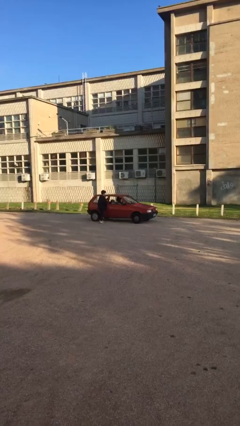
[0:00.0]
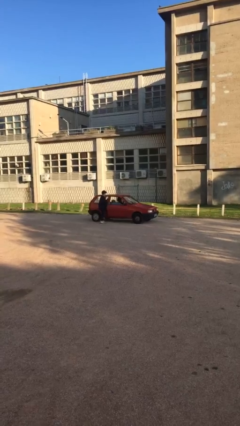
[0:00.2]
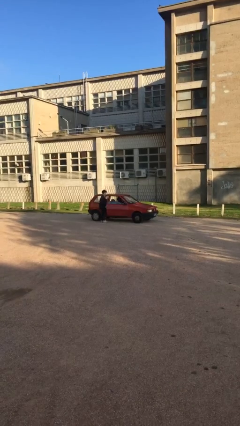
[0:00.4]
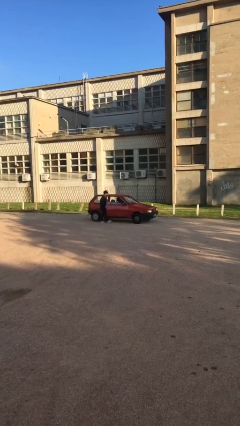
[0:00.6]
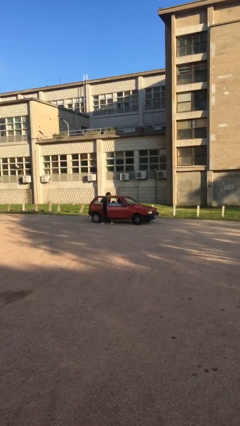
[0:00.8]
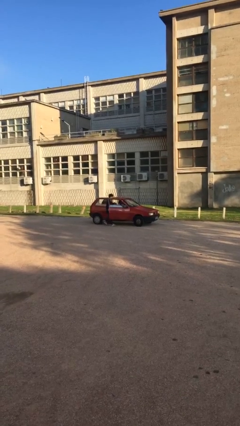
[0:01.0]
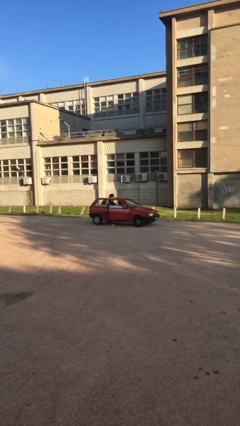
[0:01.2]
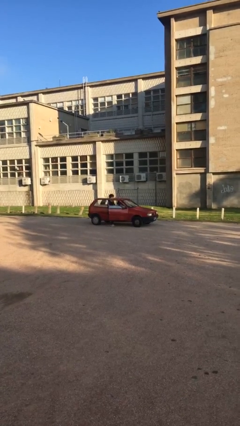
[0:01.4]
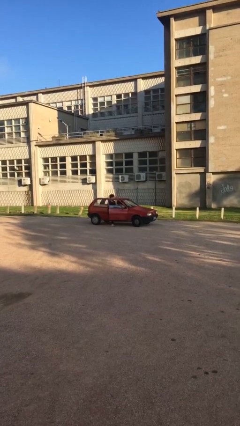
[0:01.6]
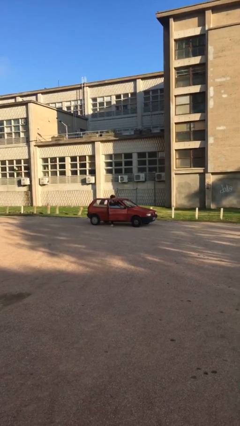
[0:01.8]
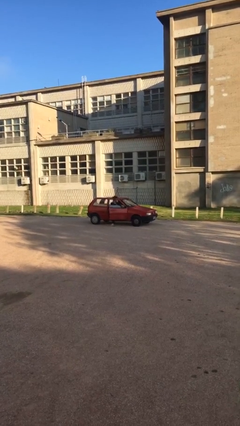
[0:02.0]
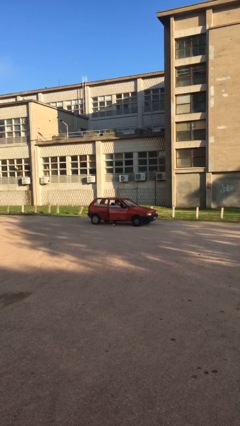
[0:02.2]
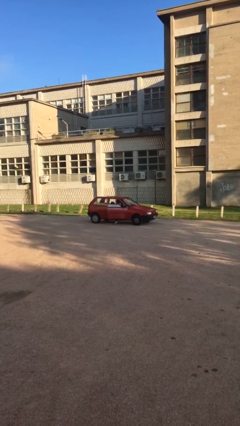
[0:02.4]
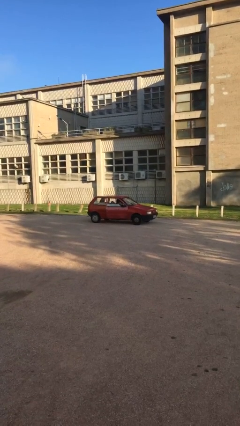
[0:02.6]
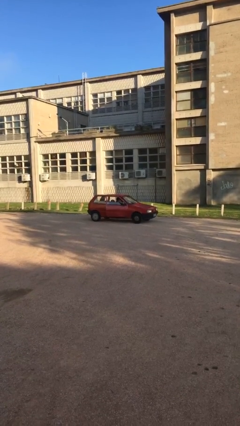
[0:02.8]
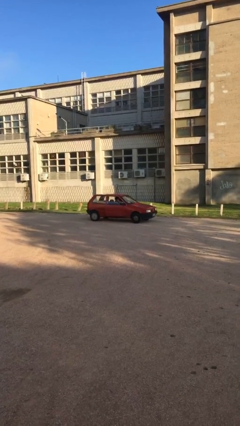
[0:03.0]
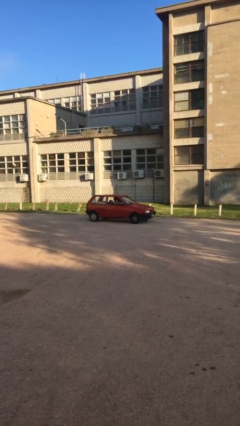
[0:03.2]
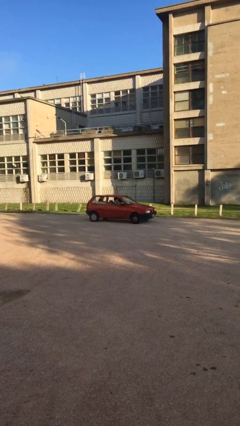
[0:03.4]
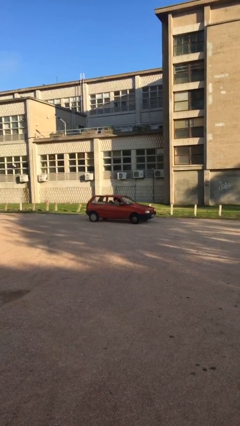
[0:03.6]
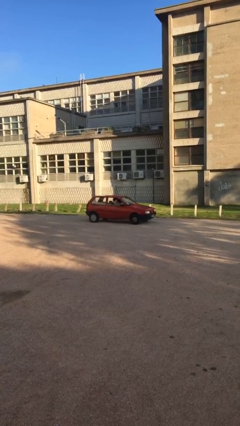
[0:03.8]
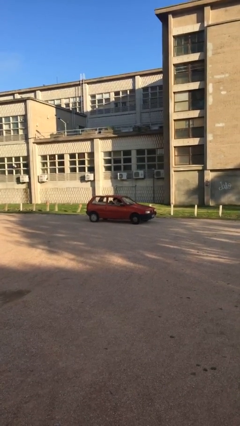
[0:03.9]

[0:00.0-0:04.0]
car picks up person

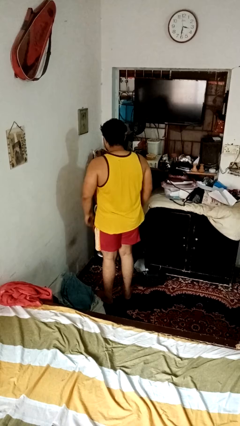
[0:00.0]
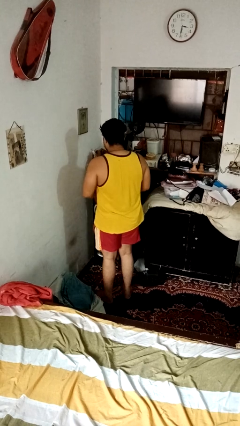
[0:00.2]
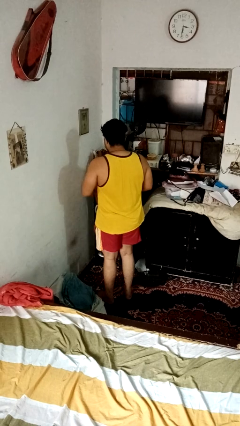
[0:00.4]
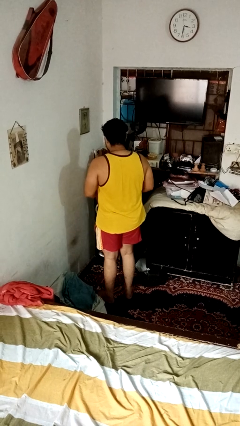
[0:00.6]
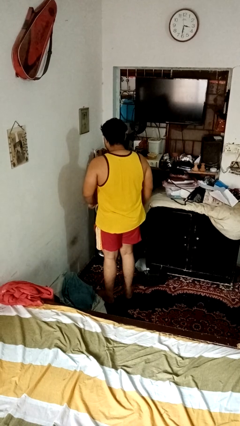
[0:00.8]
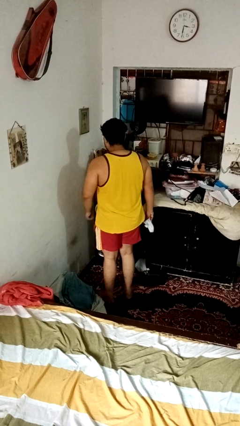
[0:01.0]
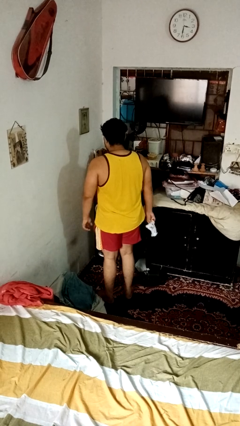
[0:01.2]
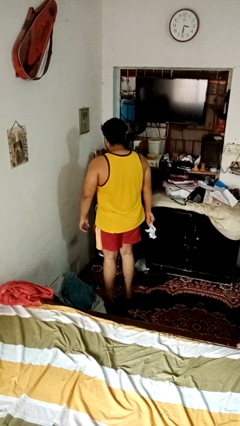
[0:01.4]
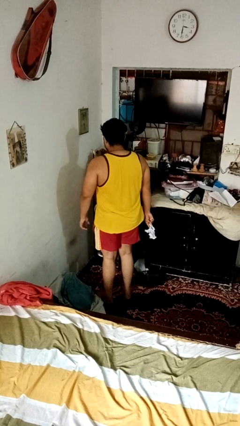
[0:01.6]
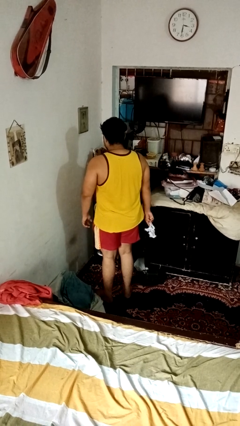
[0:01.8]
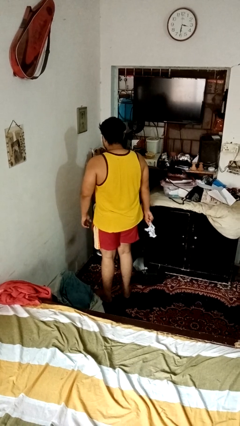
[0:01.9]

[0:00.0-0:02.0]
person crumples paper

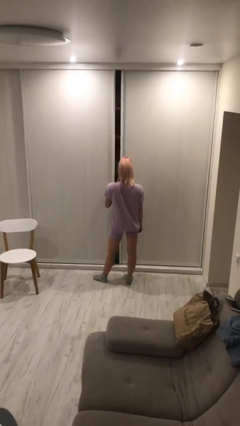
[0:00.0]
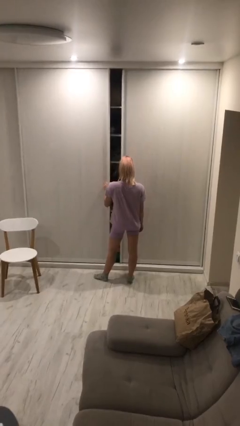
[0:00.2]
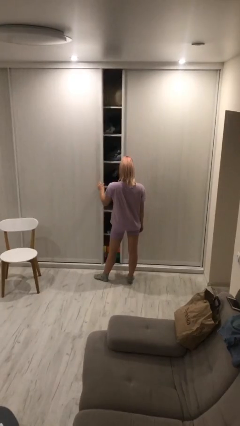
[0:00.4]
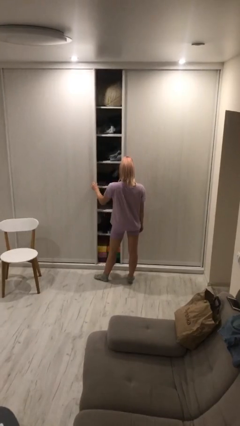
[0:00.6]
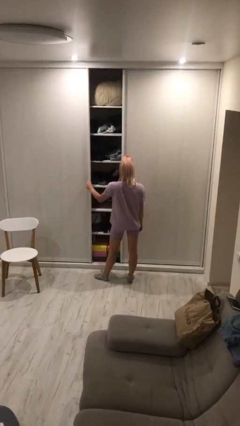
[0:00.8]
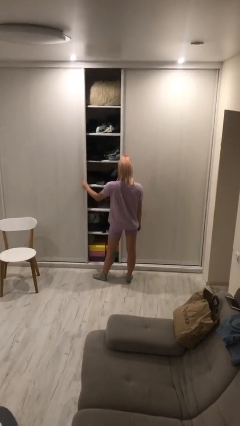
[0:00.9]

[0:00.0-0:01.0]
person opens sliding door

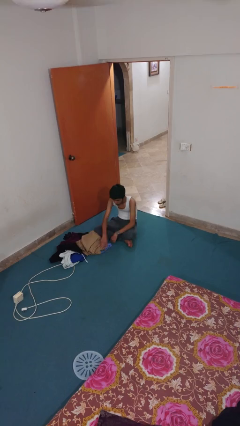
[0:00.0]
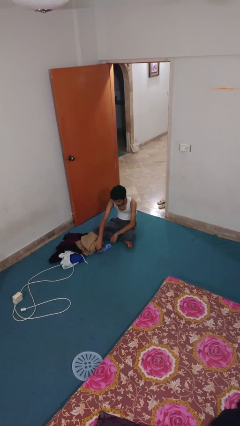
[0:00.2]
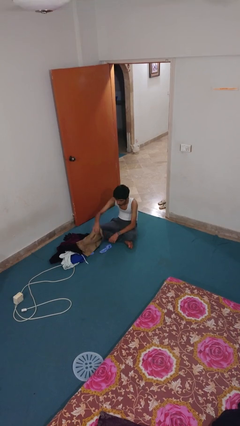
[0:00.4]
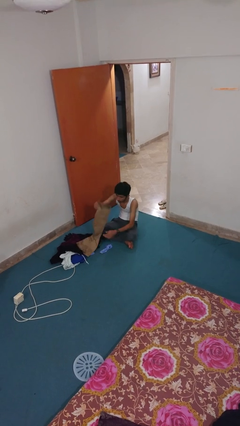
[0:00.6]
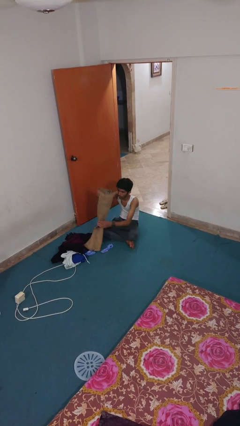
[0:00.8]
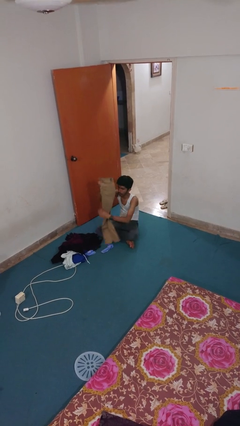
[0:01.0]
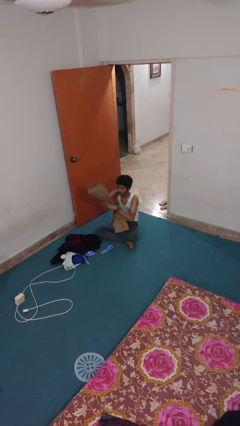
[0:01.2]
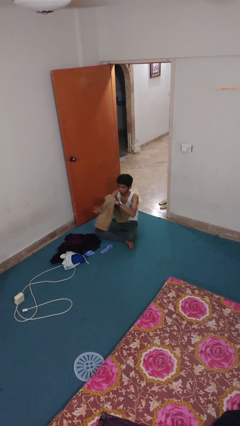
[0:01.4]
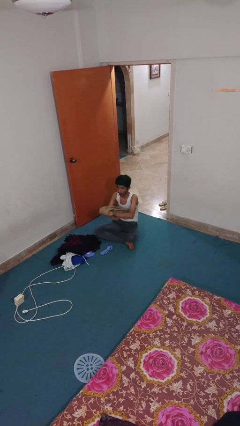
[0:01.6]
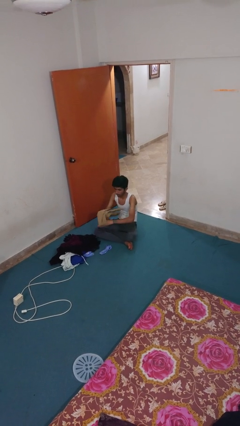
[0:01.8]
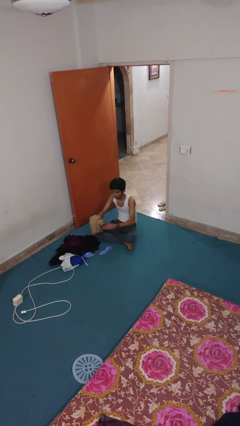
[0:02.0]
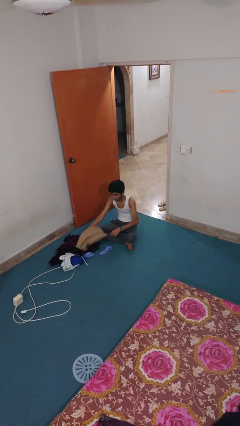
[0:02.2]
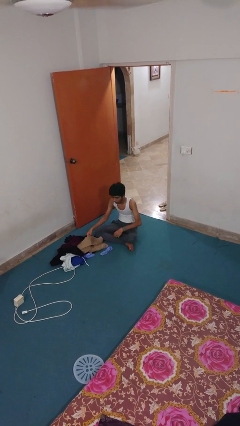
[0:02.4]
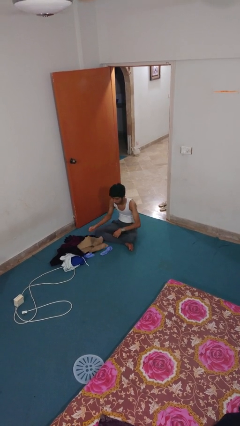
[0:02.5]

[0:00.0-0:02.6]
person folds pants

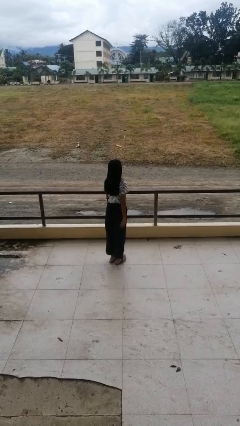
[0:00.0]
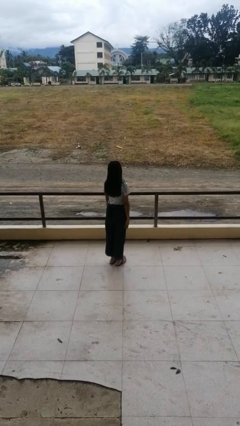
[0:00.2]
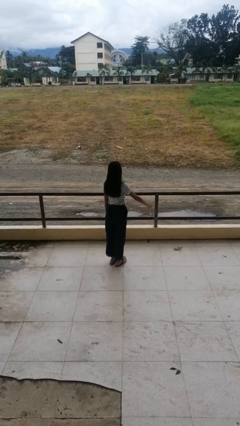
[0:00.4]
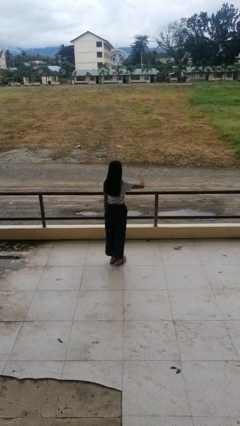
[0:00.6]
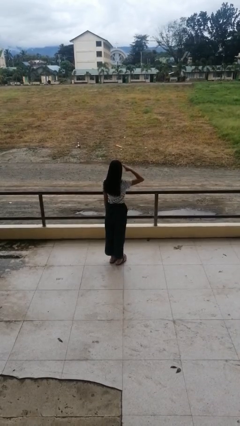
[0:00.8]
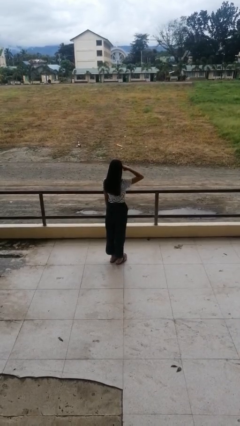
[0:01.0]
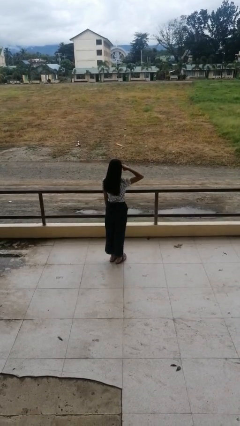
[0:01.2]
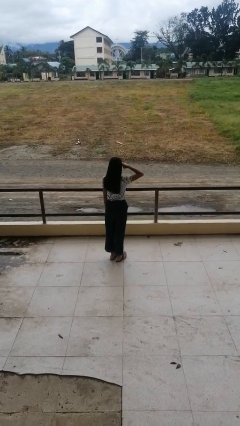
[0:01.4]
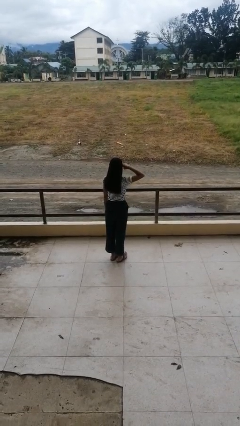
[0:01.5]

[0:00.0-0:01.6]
person salutes

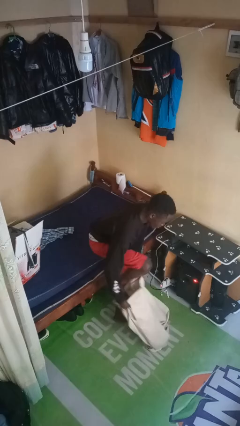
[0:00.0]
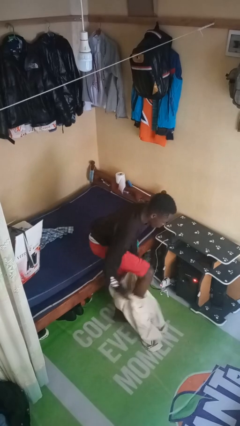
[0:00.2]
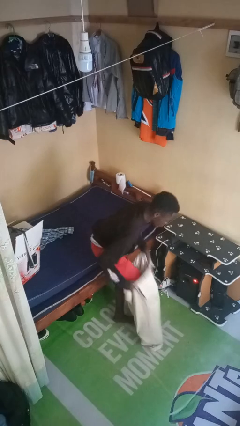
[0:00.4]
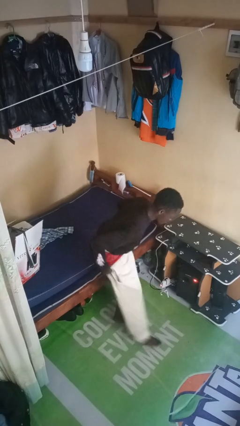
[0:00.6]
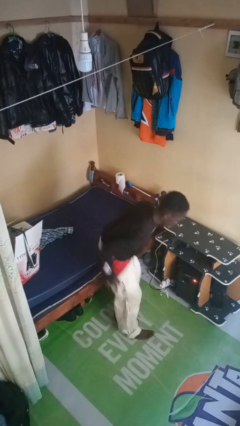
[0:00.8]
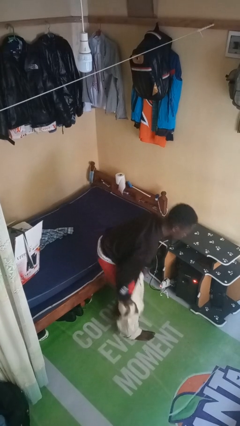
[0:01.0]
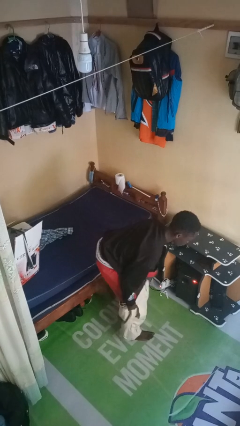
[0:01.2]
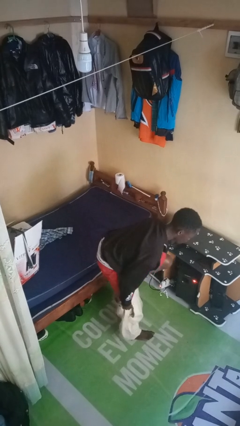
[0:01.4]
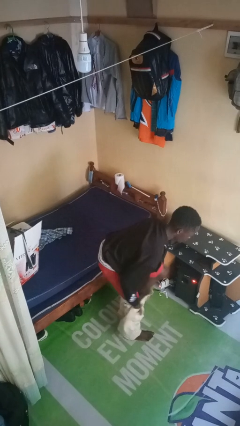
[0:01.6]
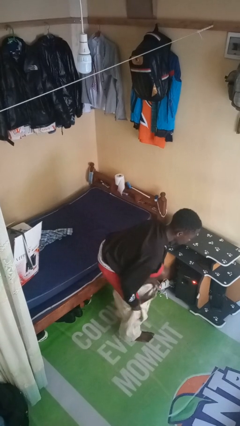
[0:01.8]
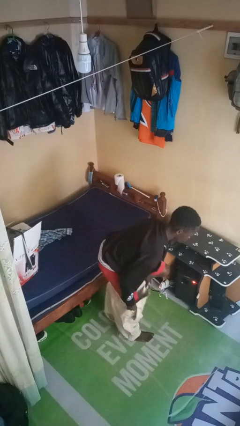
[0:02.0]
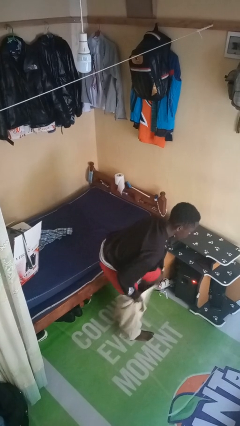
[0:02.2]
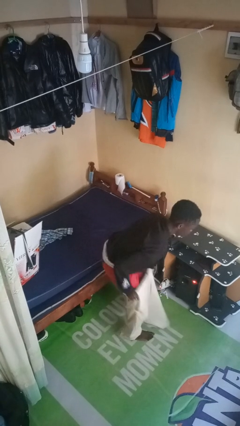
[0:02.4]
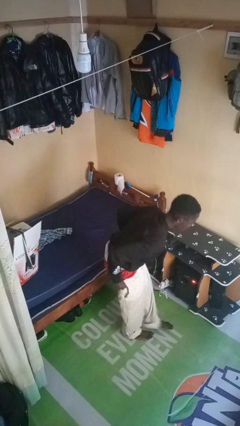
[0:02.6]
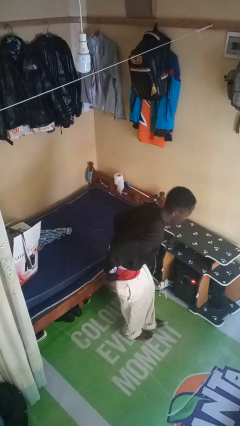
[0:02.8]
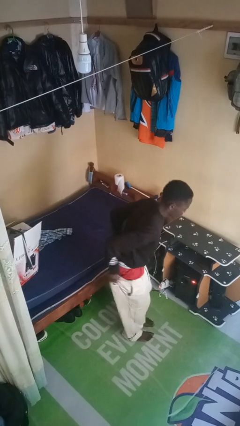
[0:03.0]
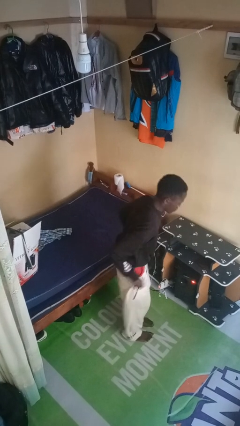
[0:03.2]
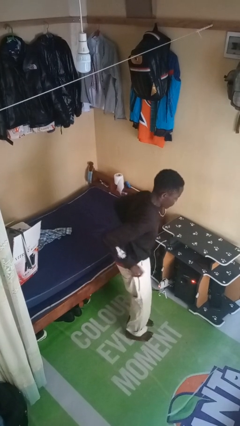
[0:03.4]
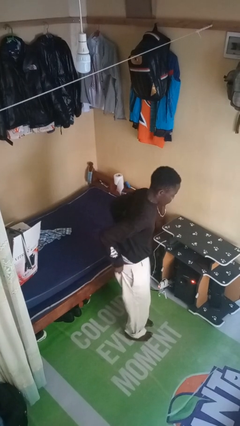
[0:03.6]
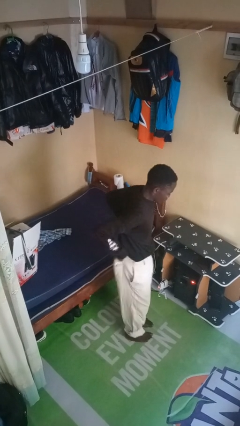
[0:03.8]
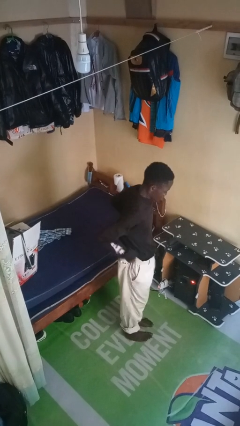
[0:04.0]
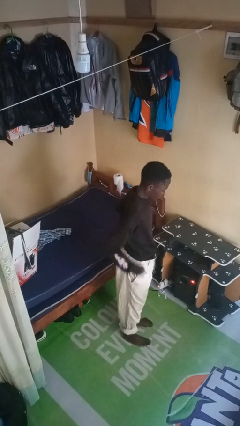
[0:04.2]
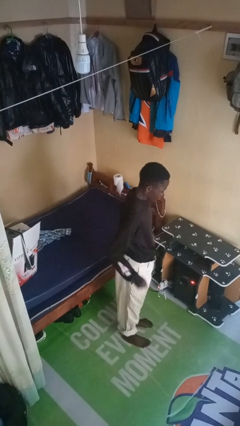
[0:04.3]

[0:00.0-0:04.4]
person puts on pants

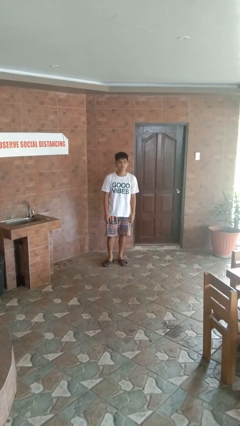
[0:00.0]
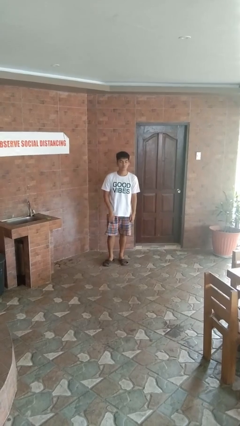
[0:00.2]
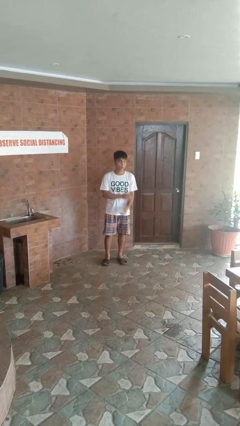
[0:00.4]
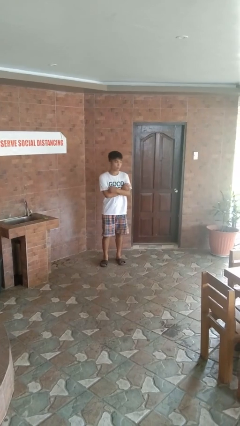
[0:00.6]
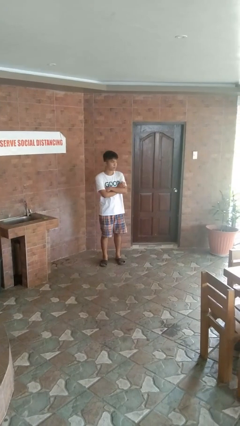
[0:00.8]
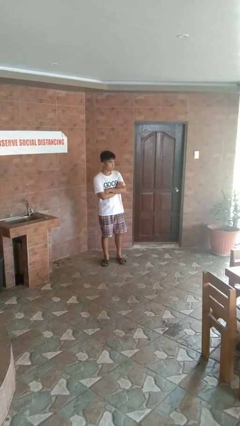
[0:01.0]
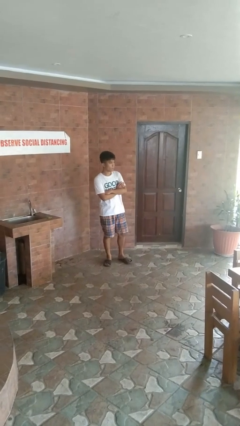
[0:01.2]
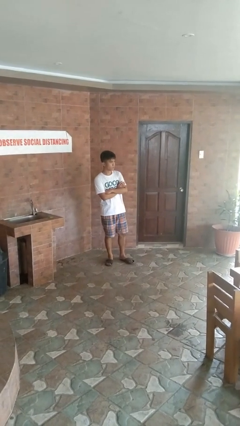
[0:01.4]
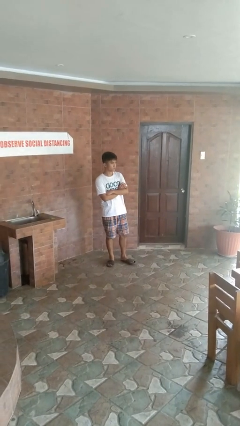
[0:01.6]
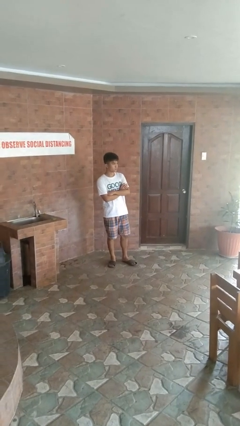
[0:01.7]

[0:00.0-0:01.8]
person crosses arms
